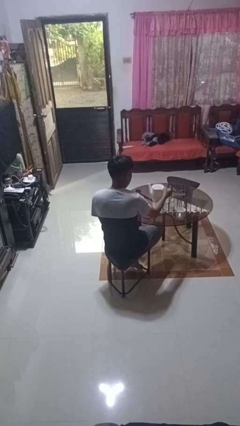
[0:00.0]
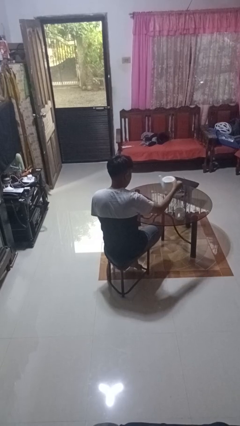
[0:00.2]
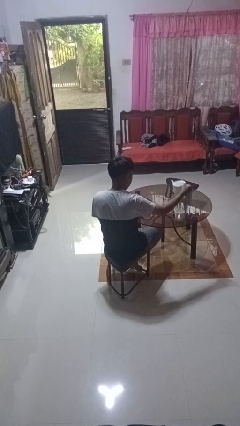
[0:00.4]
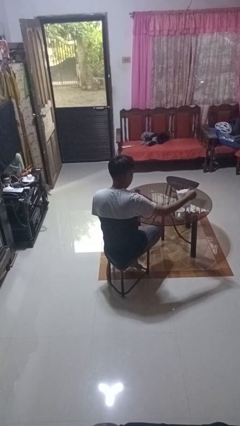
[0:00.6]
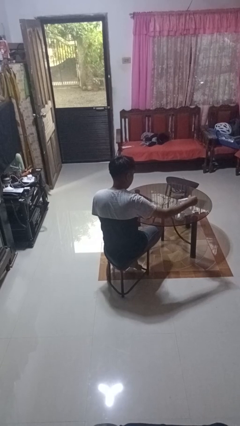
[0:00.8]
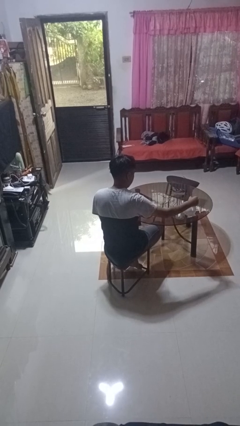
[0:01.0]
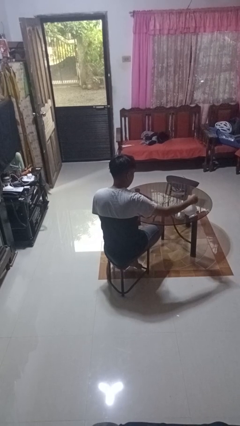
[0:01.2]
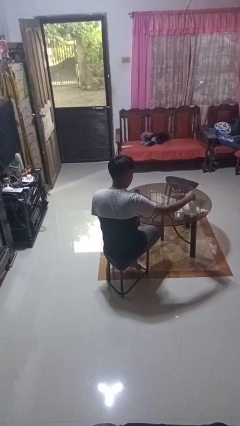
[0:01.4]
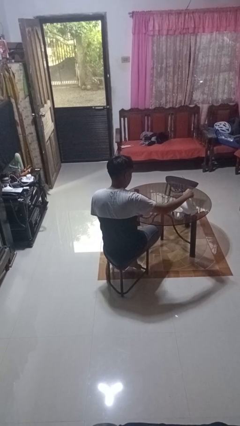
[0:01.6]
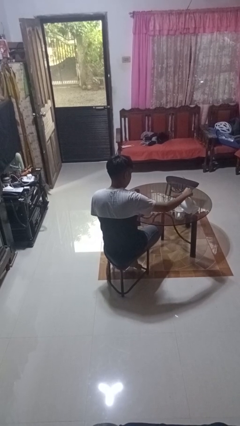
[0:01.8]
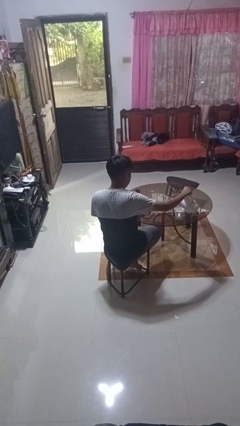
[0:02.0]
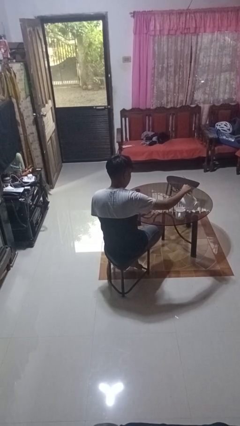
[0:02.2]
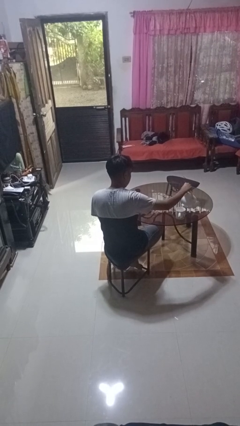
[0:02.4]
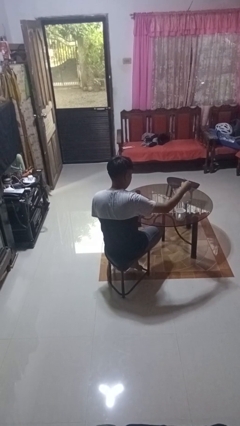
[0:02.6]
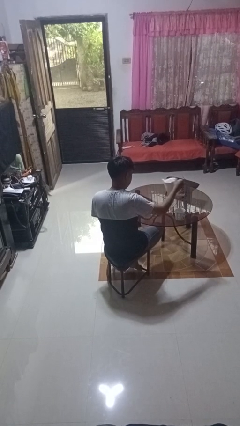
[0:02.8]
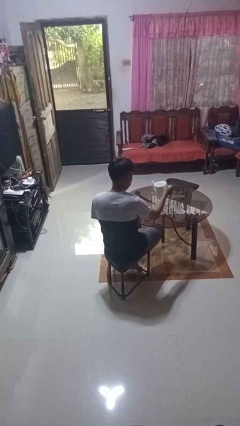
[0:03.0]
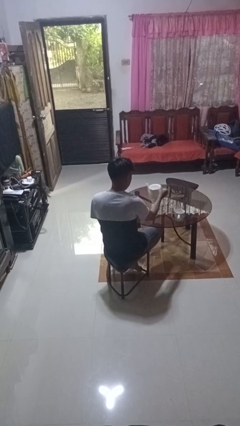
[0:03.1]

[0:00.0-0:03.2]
person pours coffee into mug

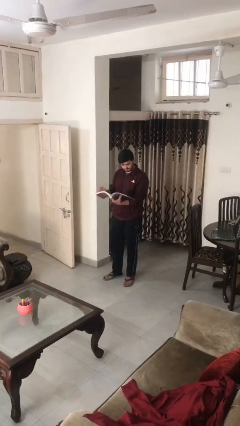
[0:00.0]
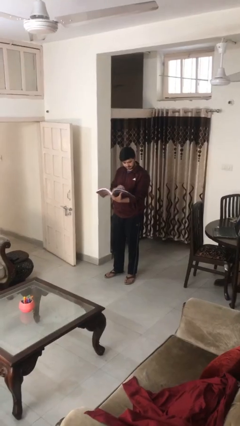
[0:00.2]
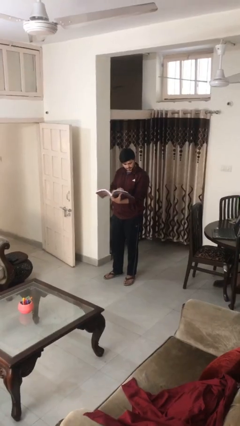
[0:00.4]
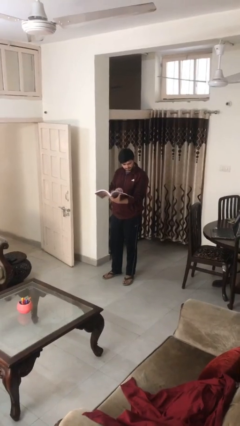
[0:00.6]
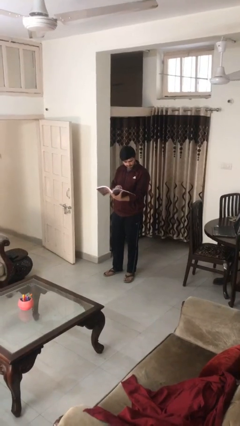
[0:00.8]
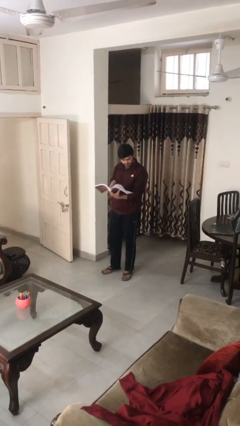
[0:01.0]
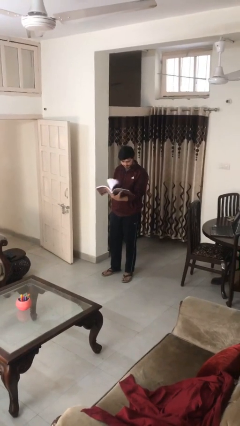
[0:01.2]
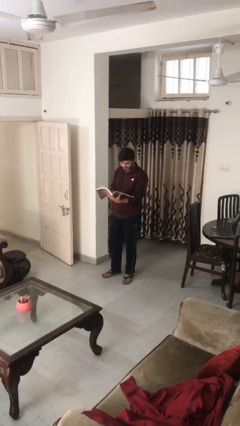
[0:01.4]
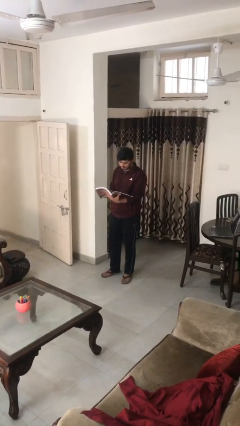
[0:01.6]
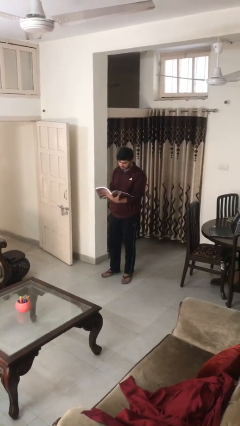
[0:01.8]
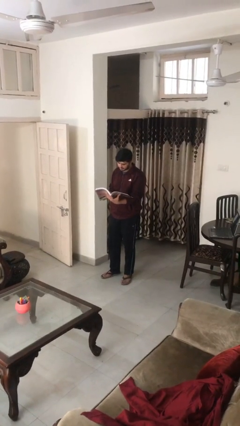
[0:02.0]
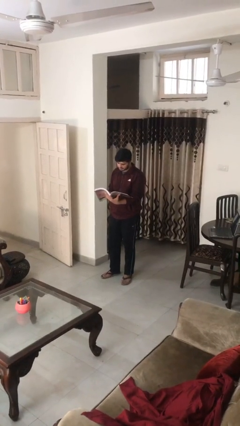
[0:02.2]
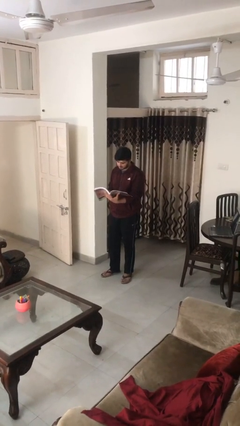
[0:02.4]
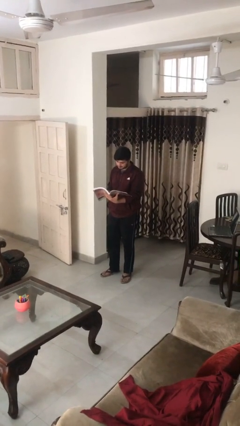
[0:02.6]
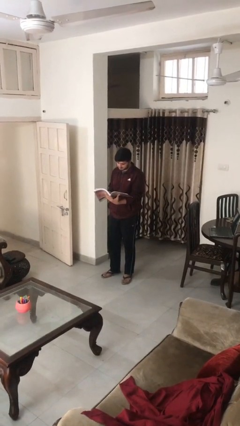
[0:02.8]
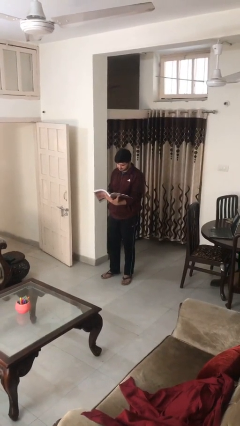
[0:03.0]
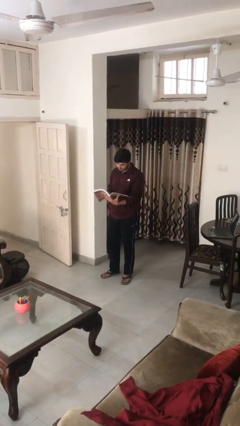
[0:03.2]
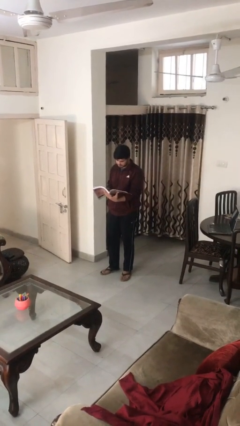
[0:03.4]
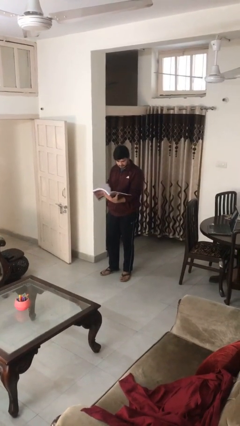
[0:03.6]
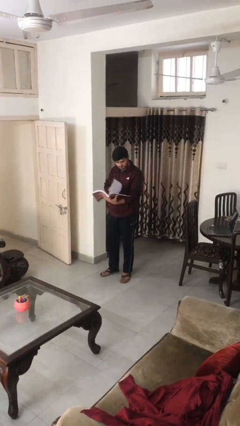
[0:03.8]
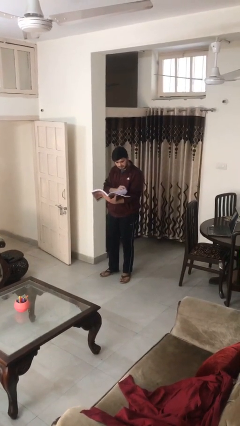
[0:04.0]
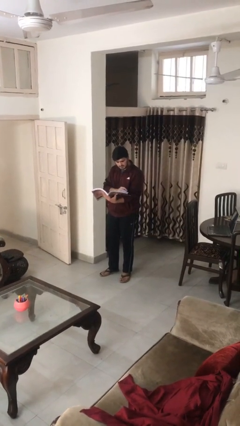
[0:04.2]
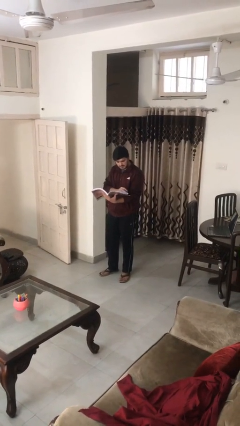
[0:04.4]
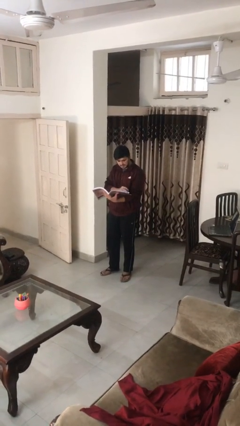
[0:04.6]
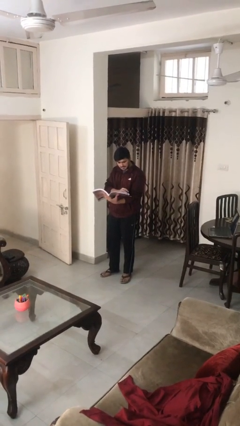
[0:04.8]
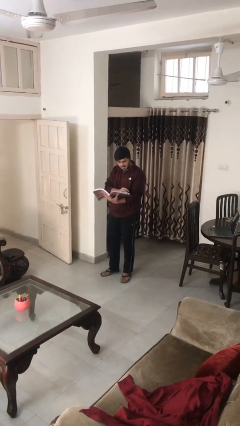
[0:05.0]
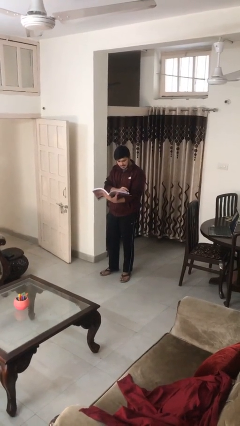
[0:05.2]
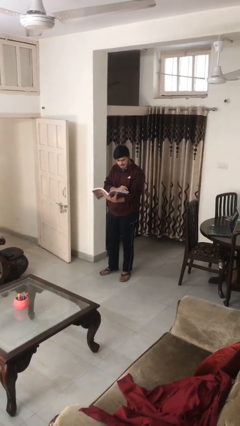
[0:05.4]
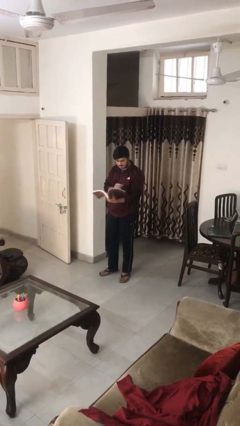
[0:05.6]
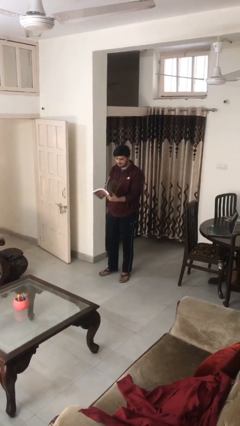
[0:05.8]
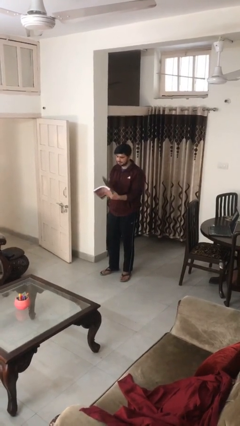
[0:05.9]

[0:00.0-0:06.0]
person reads document

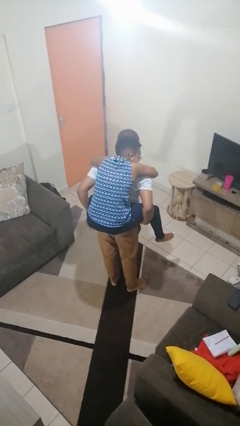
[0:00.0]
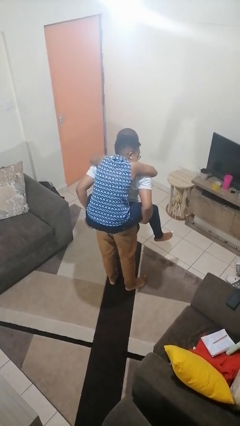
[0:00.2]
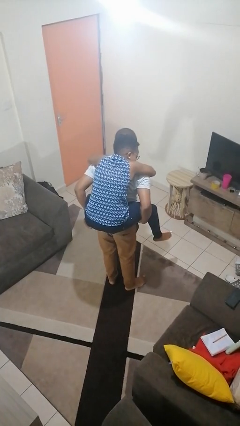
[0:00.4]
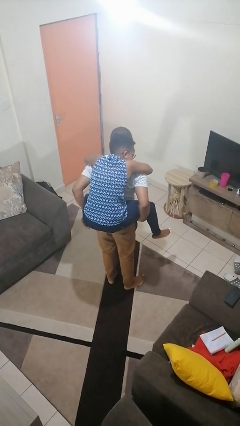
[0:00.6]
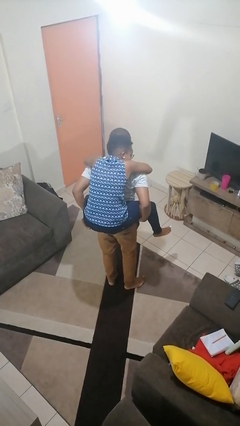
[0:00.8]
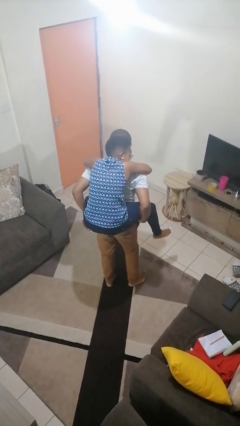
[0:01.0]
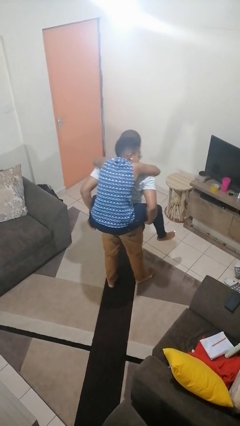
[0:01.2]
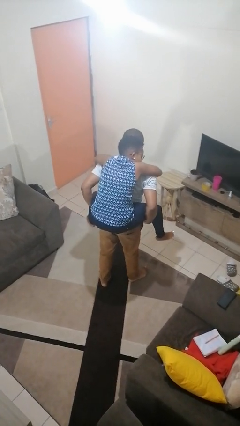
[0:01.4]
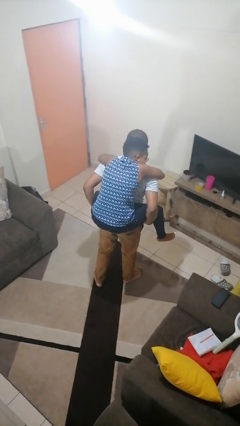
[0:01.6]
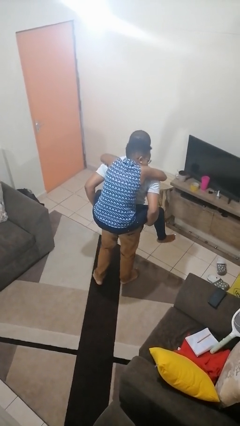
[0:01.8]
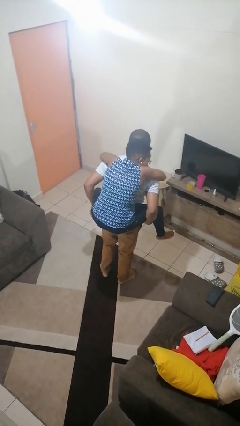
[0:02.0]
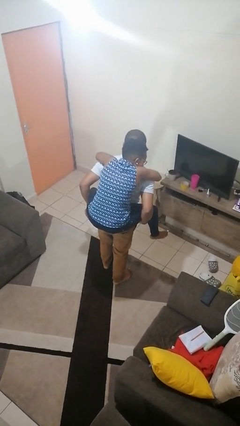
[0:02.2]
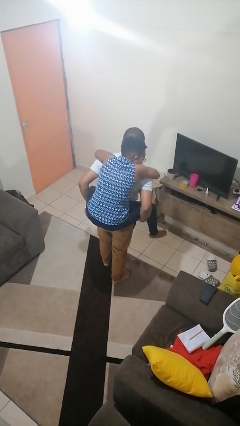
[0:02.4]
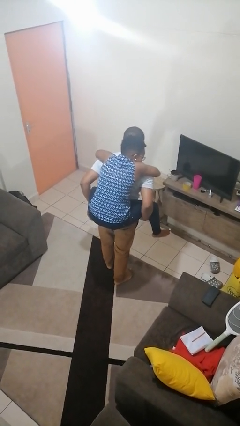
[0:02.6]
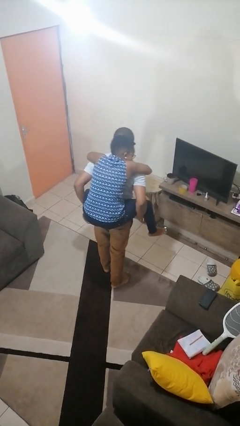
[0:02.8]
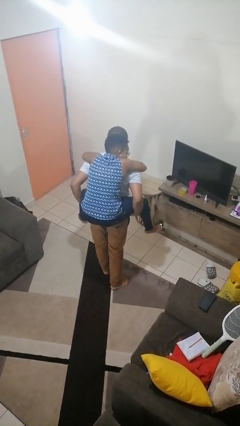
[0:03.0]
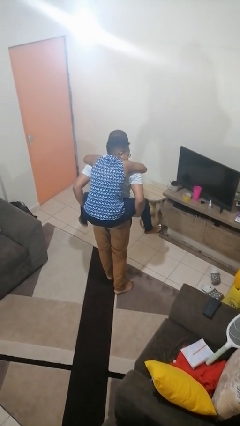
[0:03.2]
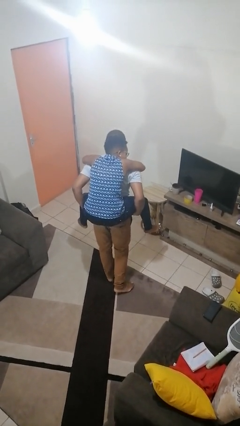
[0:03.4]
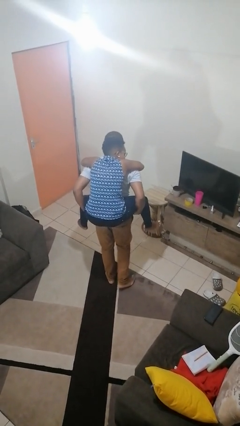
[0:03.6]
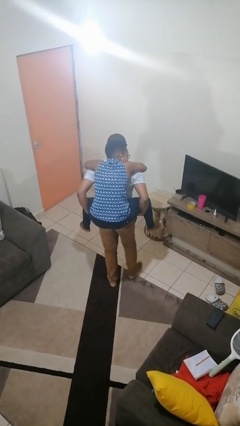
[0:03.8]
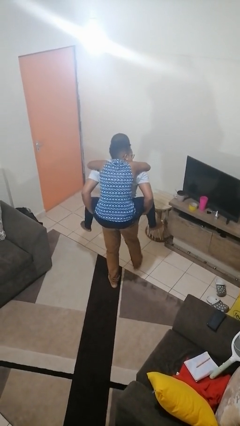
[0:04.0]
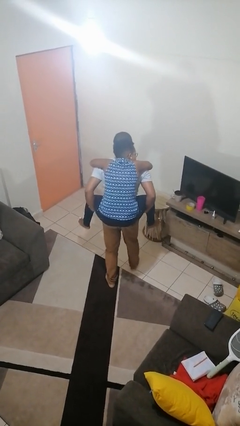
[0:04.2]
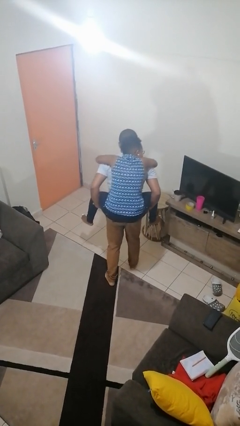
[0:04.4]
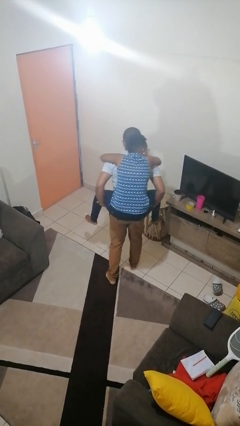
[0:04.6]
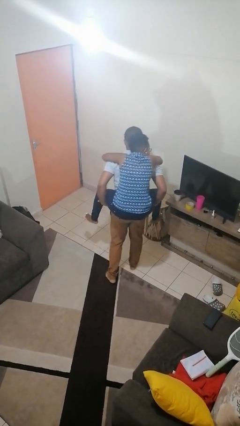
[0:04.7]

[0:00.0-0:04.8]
person carries person on back

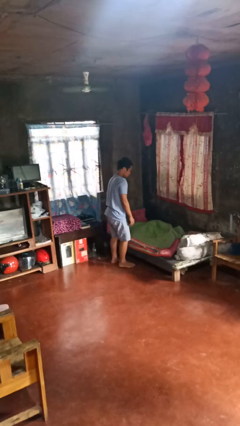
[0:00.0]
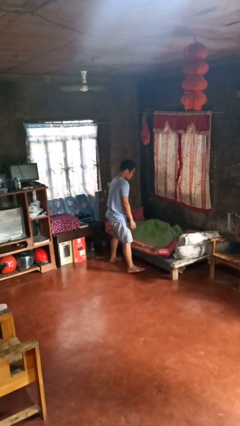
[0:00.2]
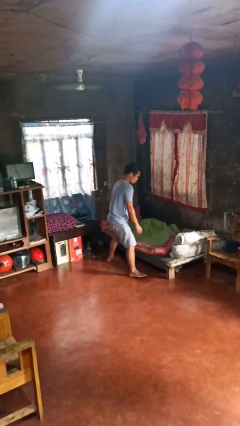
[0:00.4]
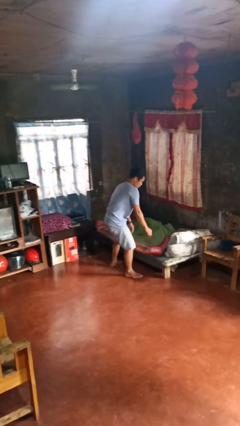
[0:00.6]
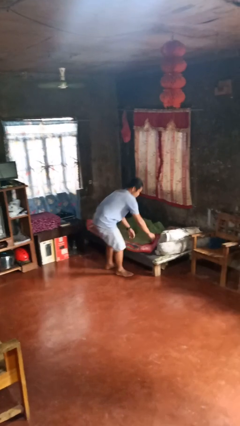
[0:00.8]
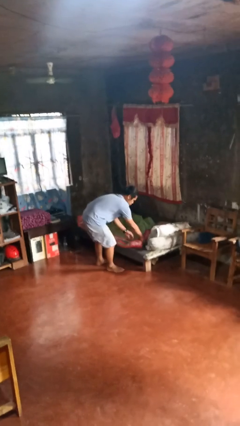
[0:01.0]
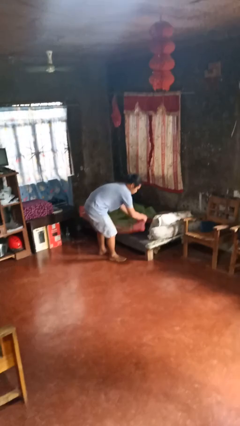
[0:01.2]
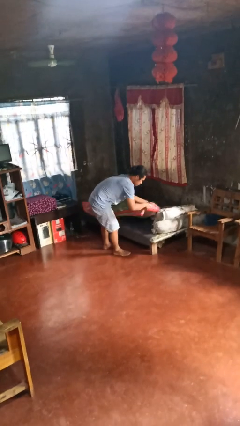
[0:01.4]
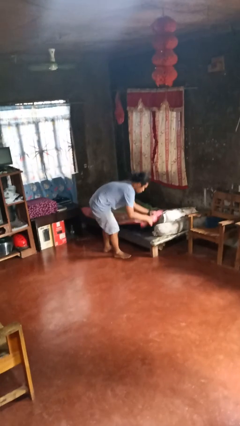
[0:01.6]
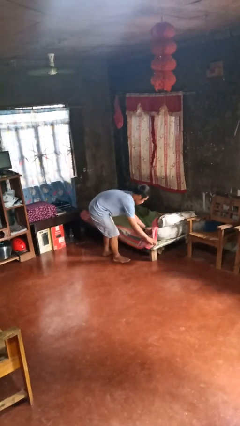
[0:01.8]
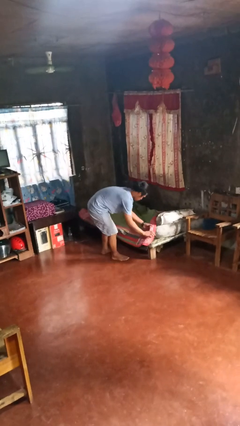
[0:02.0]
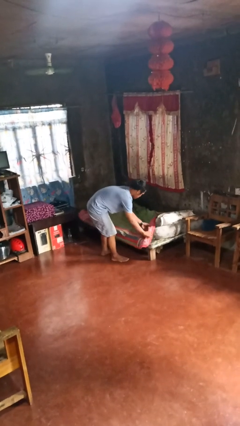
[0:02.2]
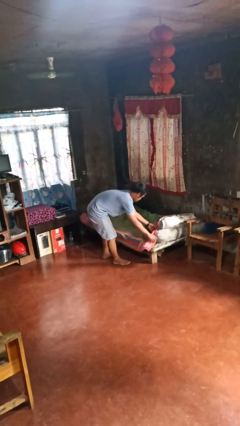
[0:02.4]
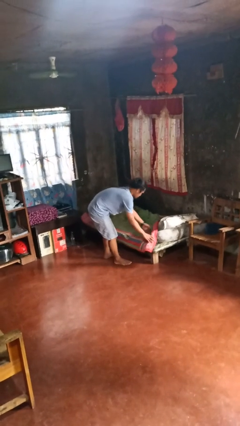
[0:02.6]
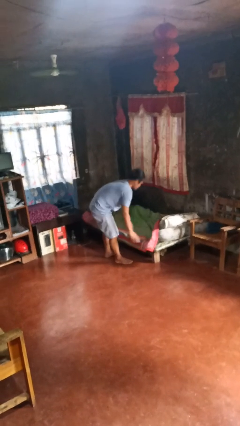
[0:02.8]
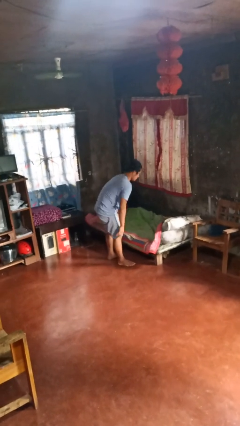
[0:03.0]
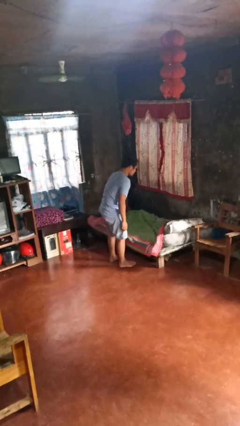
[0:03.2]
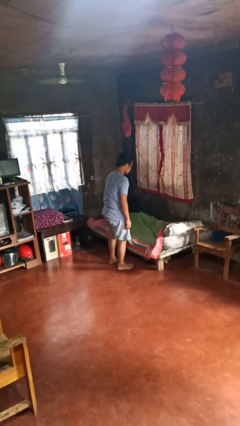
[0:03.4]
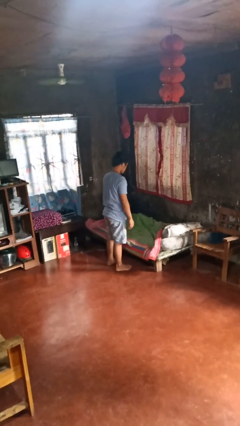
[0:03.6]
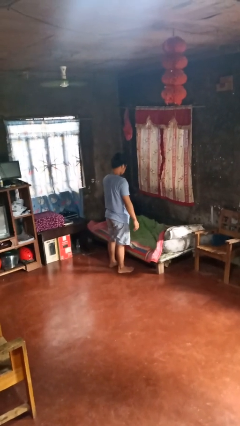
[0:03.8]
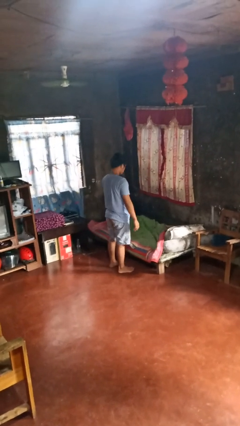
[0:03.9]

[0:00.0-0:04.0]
person makes bed
